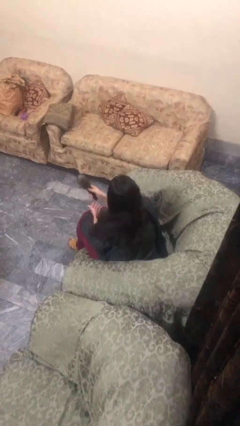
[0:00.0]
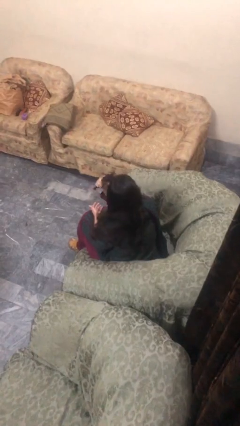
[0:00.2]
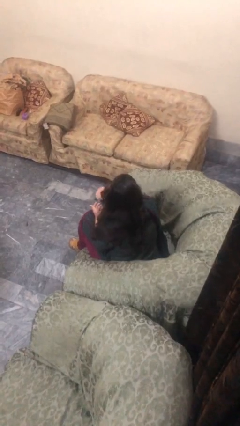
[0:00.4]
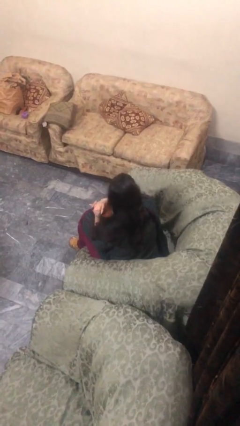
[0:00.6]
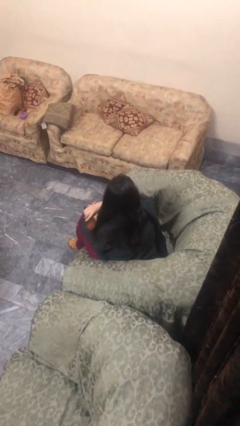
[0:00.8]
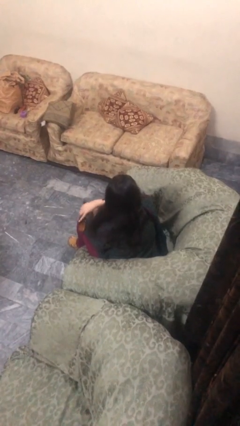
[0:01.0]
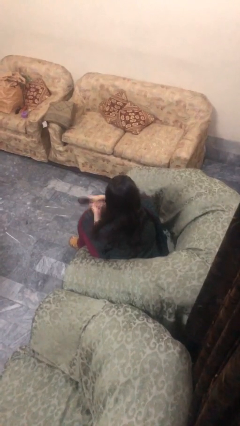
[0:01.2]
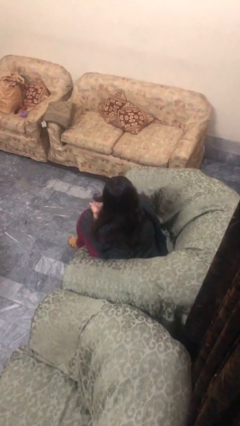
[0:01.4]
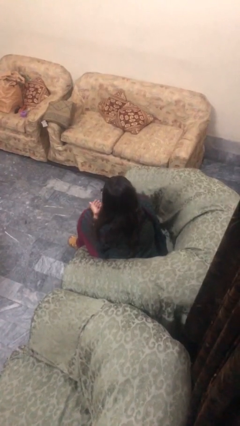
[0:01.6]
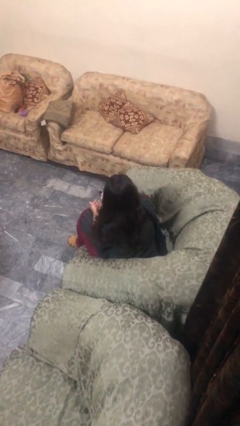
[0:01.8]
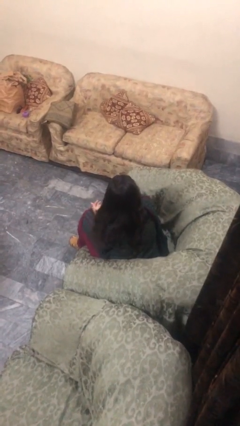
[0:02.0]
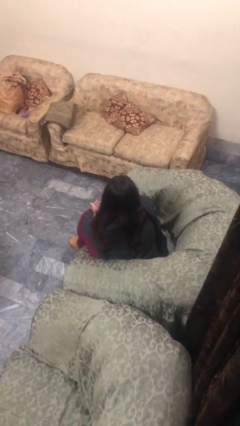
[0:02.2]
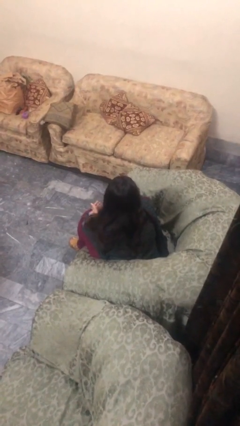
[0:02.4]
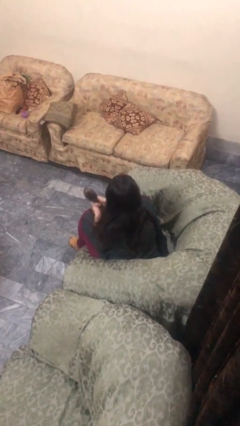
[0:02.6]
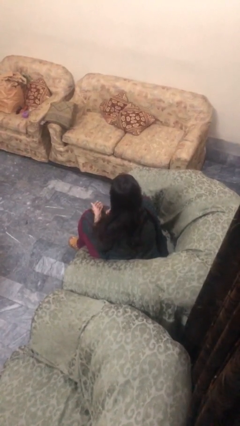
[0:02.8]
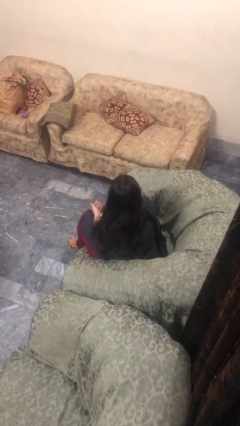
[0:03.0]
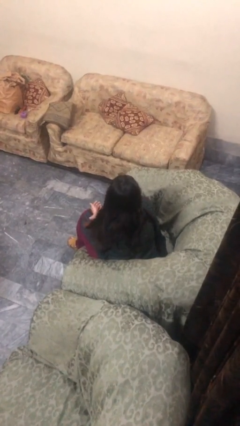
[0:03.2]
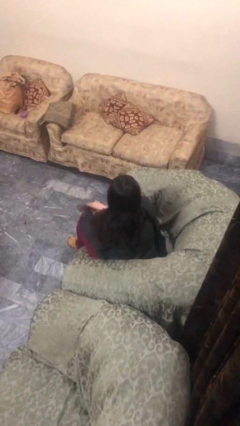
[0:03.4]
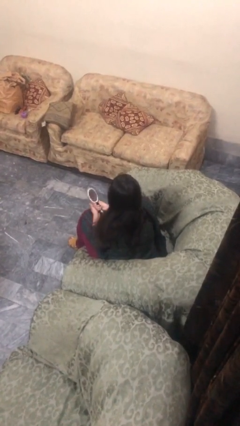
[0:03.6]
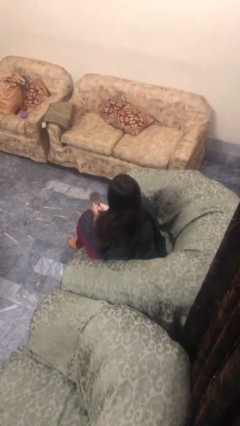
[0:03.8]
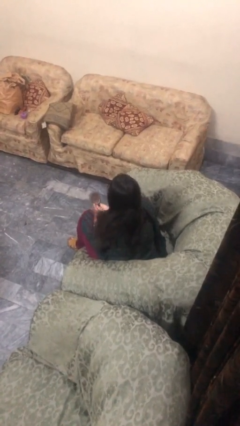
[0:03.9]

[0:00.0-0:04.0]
person brushes hair

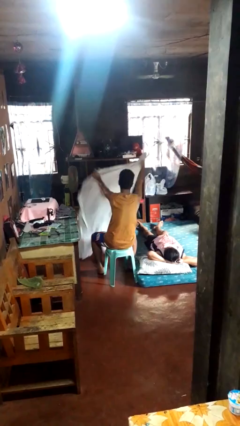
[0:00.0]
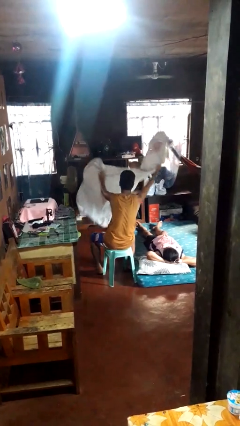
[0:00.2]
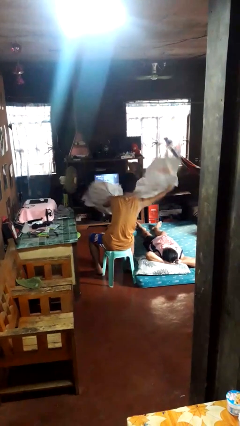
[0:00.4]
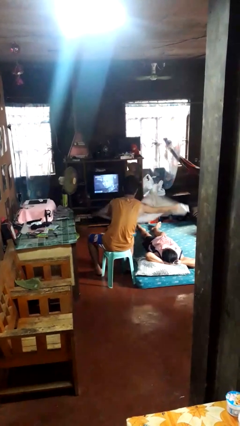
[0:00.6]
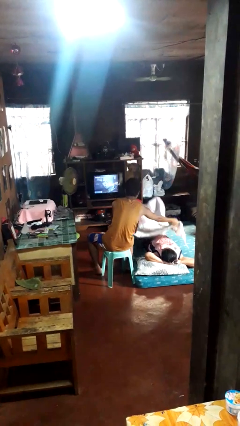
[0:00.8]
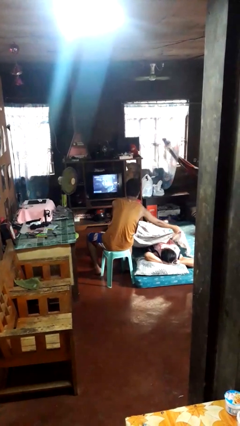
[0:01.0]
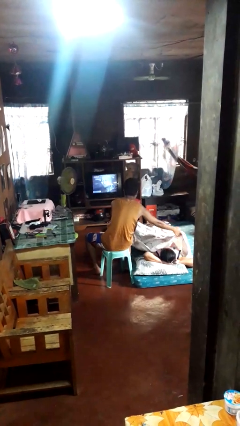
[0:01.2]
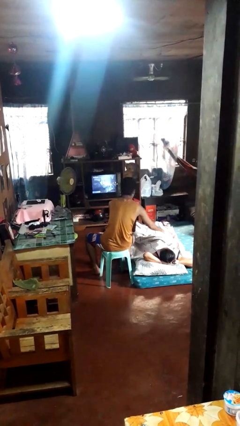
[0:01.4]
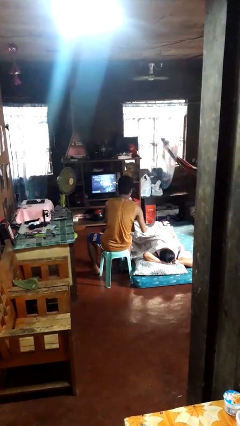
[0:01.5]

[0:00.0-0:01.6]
person covers friend with blanket

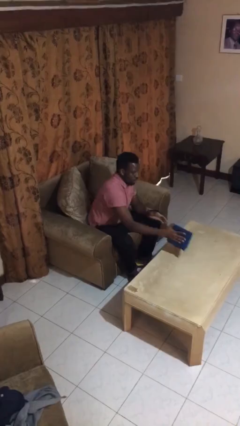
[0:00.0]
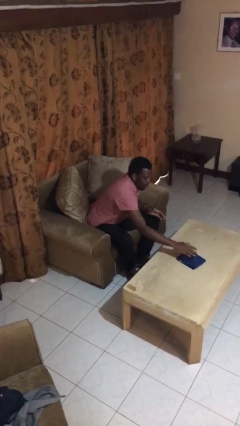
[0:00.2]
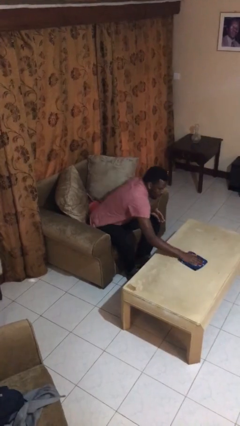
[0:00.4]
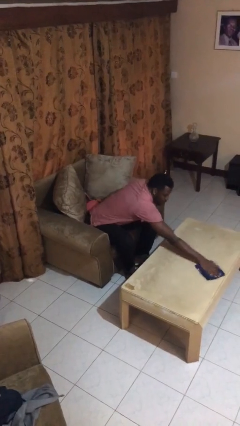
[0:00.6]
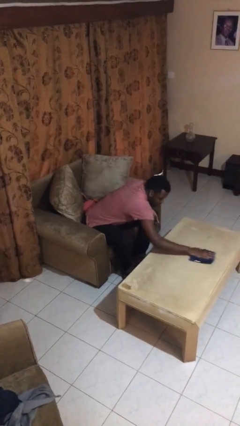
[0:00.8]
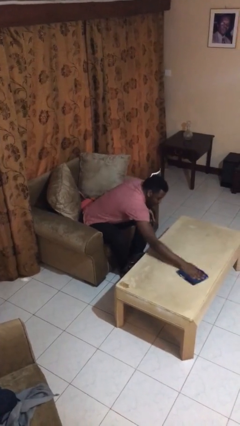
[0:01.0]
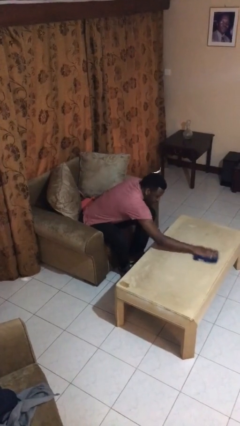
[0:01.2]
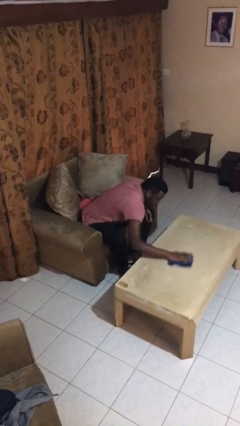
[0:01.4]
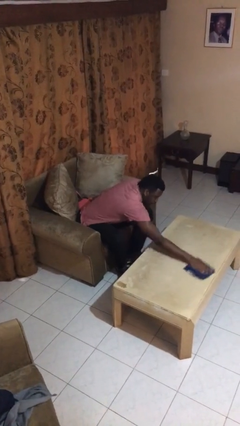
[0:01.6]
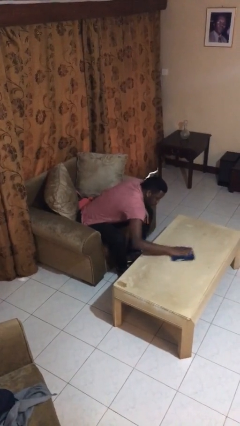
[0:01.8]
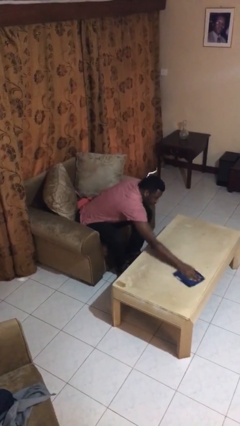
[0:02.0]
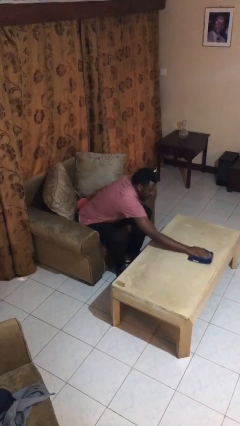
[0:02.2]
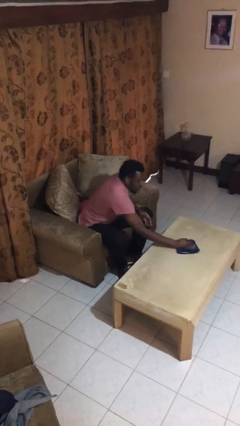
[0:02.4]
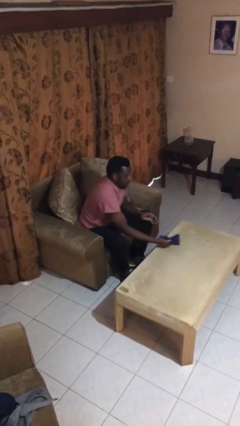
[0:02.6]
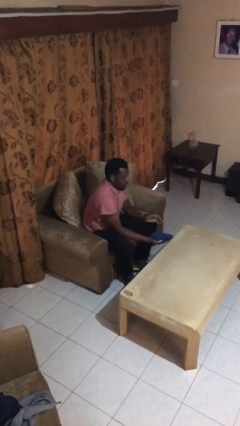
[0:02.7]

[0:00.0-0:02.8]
person cleans table with rag

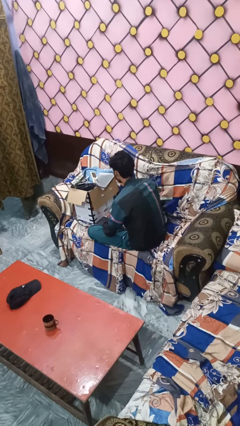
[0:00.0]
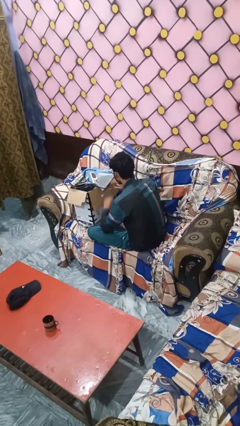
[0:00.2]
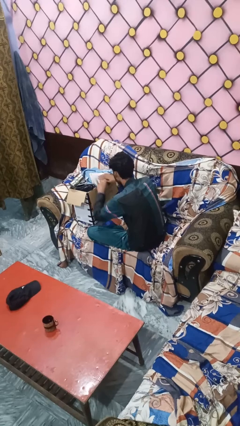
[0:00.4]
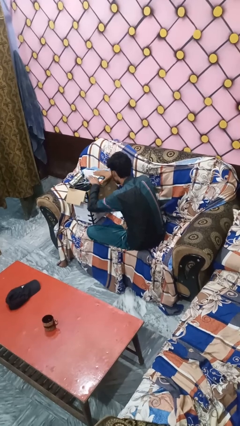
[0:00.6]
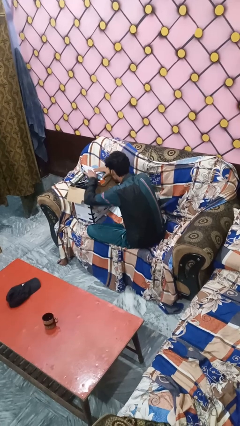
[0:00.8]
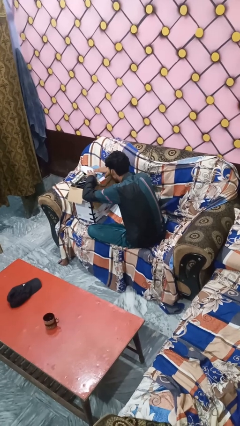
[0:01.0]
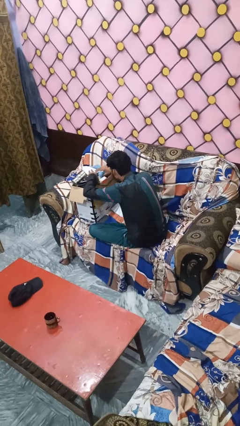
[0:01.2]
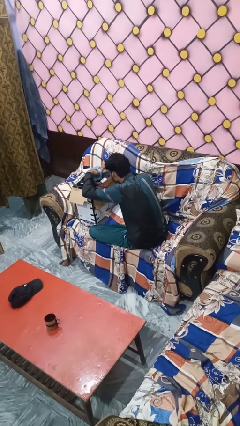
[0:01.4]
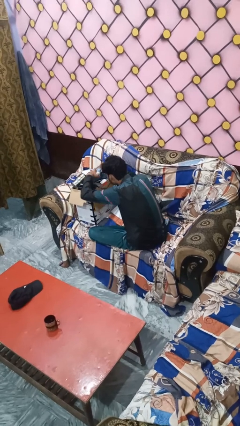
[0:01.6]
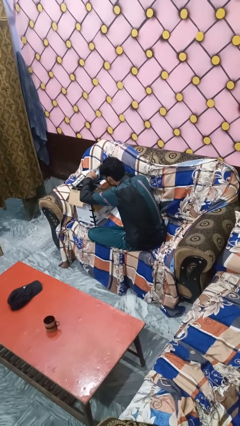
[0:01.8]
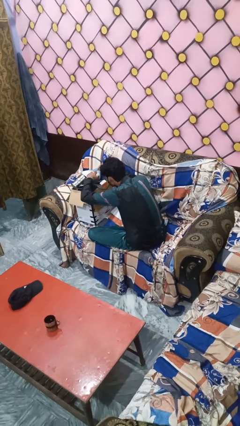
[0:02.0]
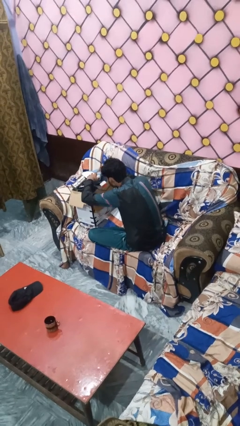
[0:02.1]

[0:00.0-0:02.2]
person searches in box

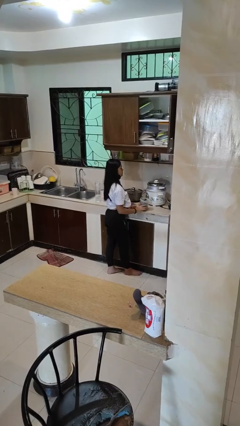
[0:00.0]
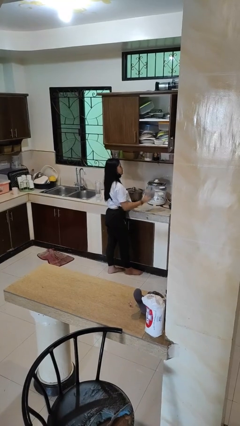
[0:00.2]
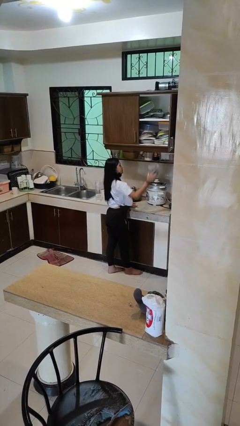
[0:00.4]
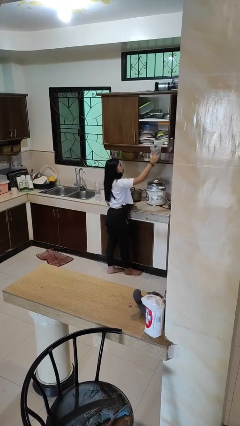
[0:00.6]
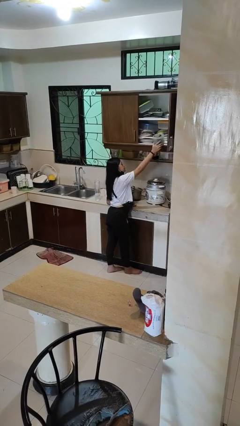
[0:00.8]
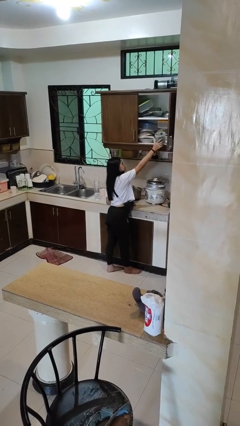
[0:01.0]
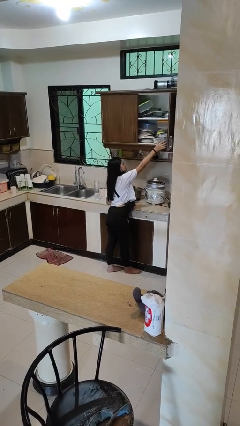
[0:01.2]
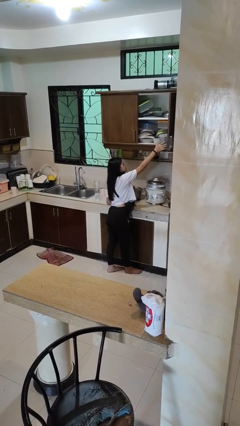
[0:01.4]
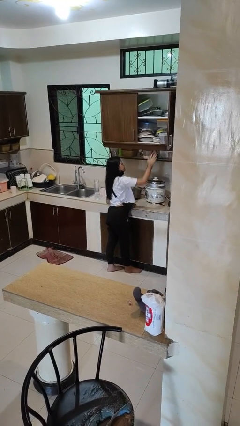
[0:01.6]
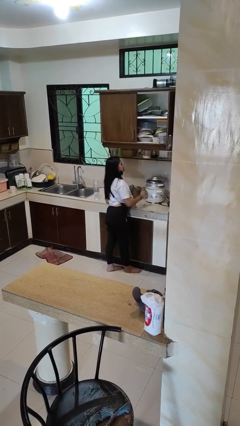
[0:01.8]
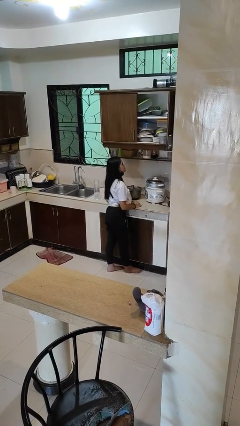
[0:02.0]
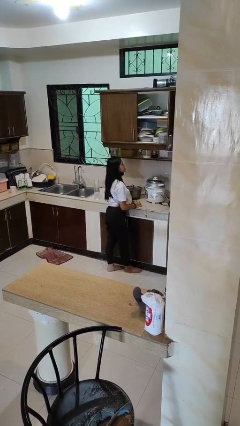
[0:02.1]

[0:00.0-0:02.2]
person puts down object on shelf

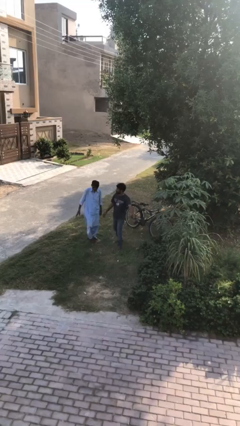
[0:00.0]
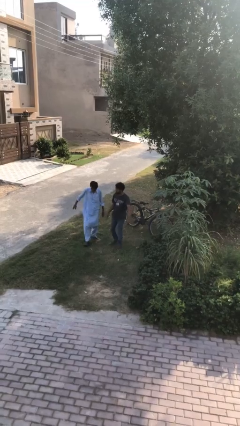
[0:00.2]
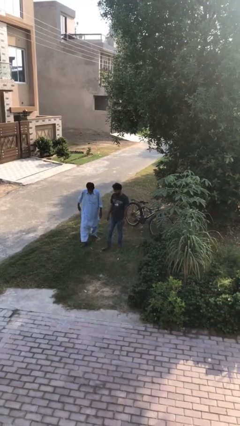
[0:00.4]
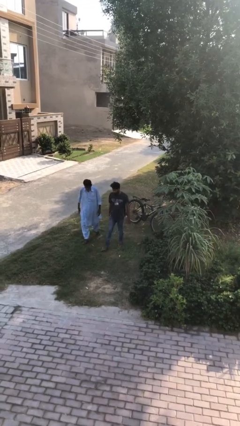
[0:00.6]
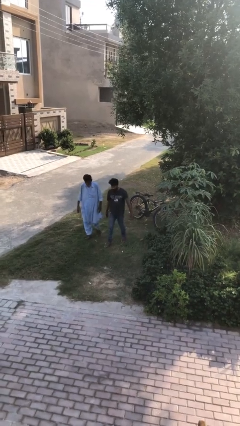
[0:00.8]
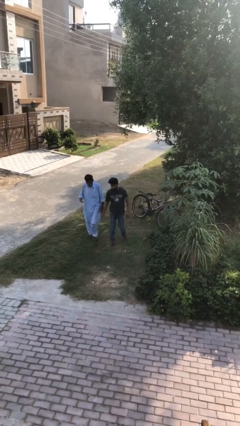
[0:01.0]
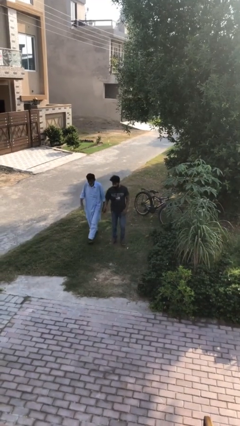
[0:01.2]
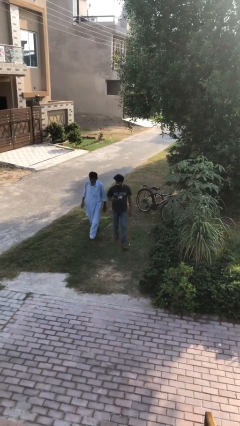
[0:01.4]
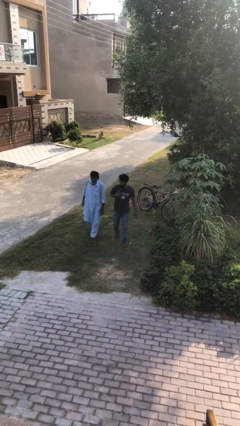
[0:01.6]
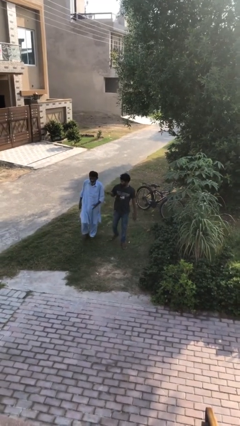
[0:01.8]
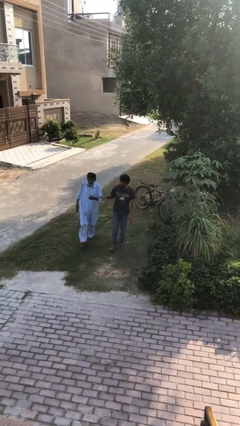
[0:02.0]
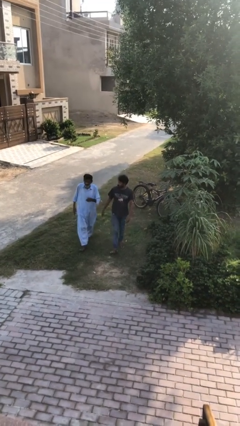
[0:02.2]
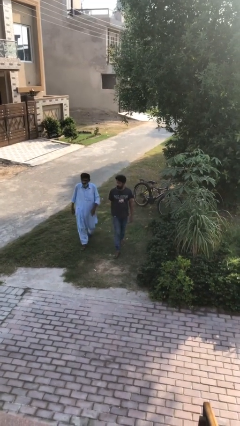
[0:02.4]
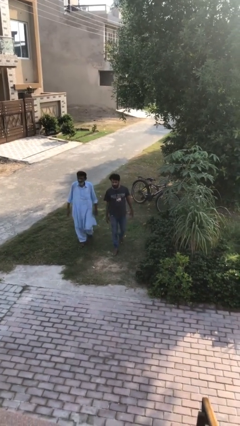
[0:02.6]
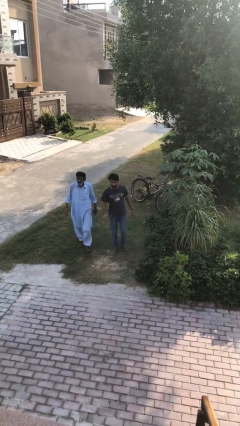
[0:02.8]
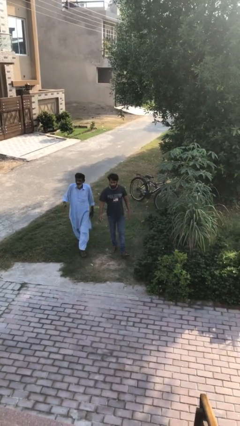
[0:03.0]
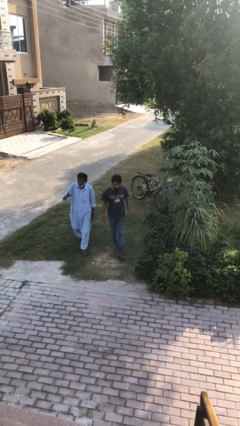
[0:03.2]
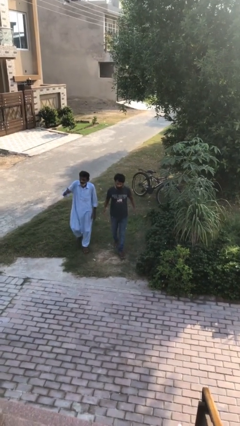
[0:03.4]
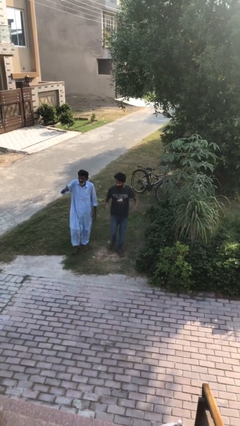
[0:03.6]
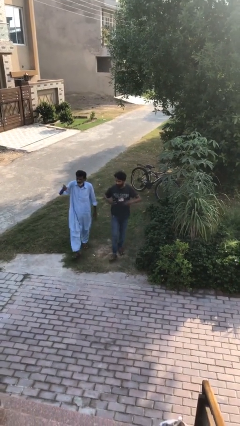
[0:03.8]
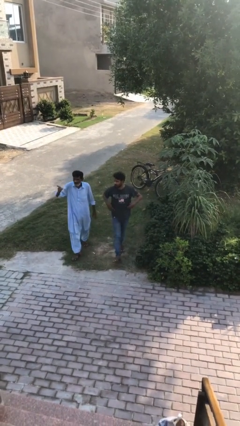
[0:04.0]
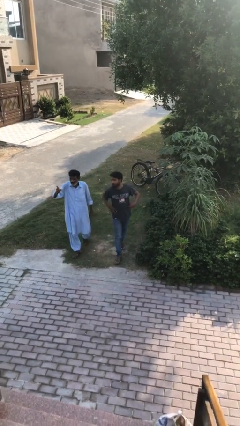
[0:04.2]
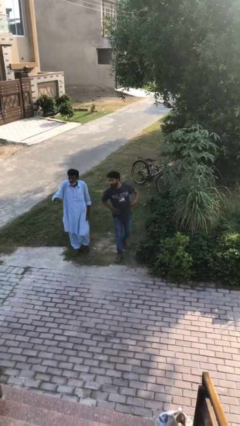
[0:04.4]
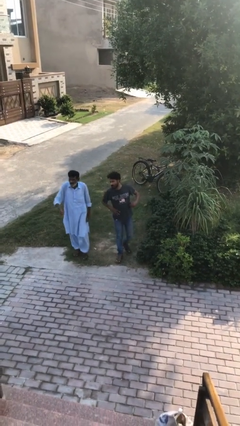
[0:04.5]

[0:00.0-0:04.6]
person talks to person
